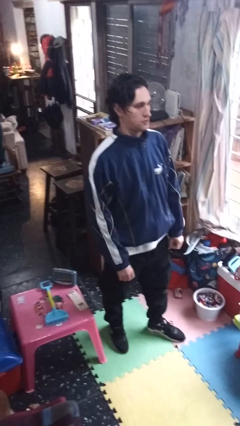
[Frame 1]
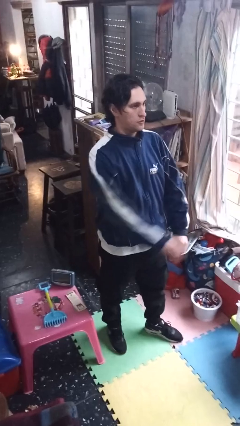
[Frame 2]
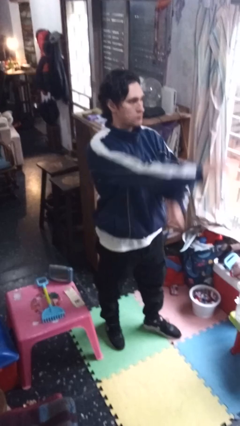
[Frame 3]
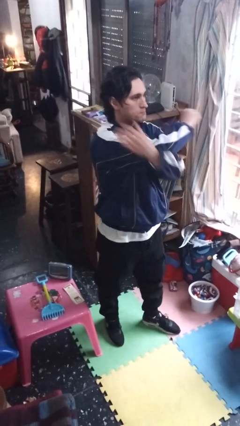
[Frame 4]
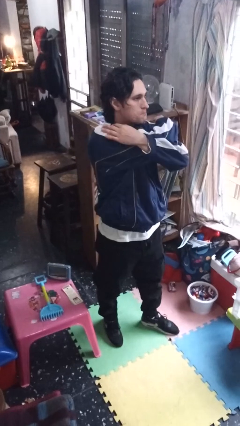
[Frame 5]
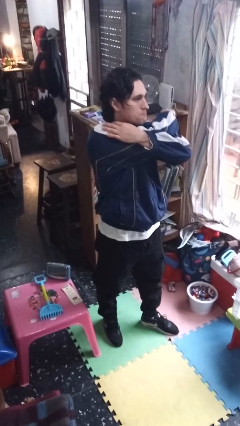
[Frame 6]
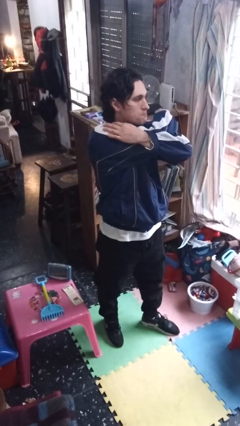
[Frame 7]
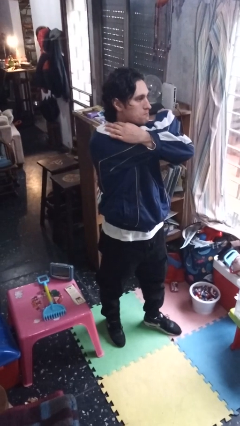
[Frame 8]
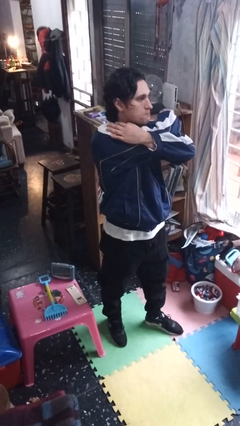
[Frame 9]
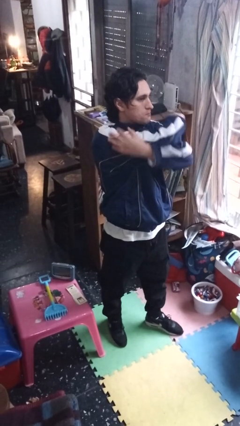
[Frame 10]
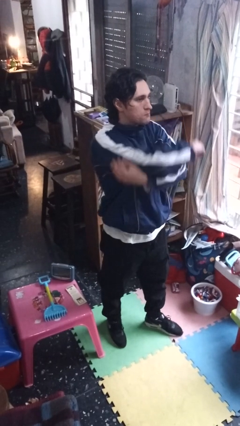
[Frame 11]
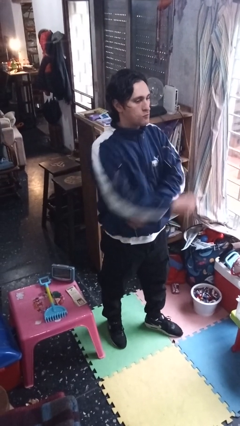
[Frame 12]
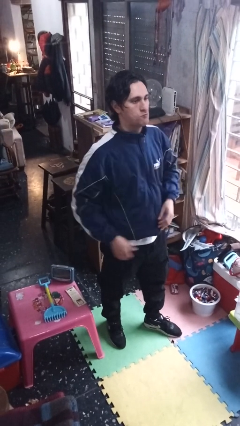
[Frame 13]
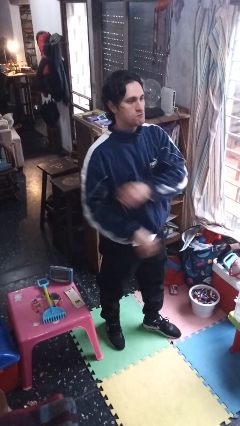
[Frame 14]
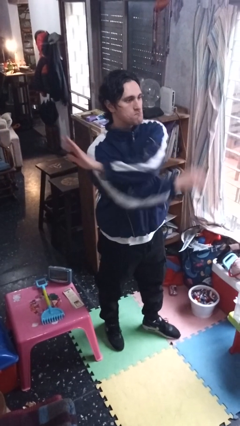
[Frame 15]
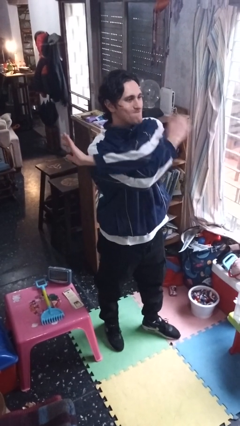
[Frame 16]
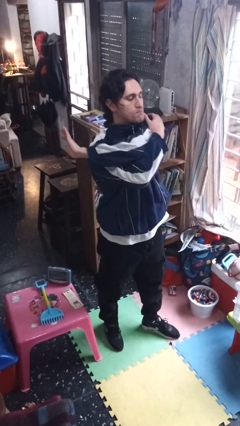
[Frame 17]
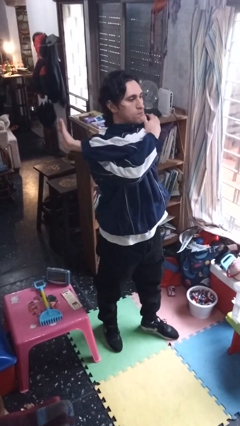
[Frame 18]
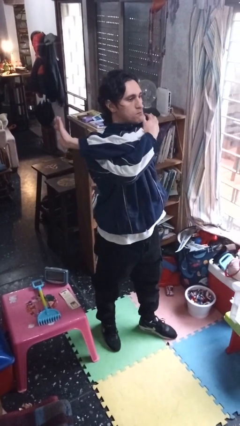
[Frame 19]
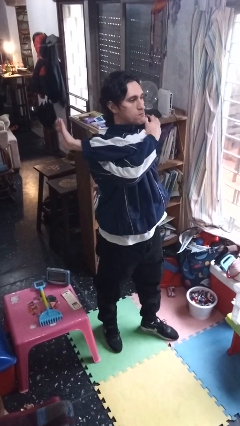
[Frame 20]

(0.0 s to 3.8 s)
person stretches arms to side

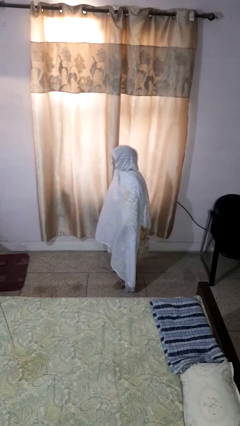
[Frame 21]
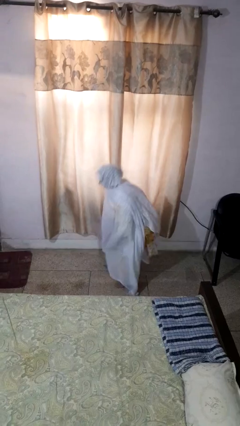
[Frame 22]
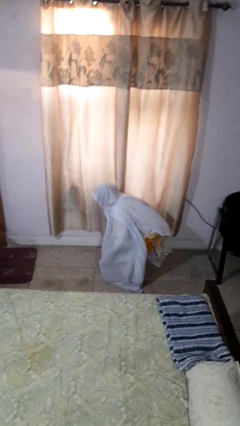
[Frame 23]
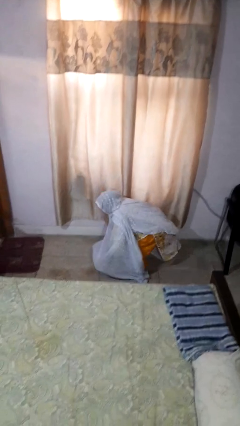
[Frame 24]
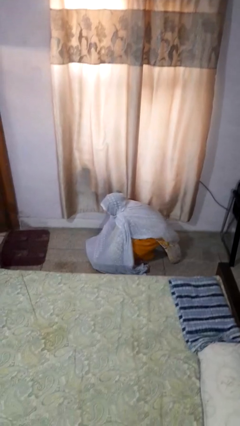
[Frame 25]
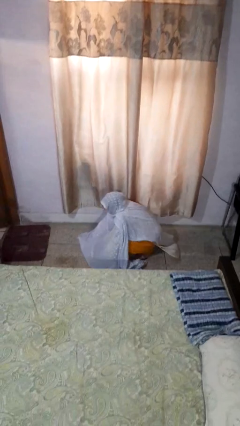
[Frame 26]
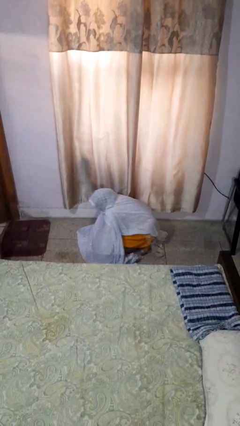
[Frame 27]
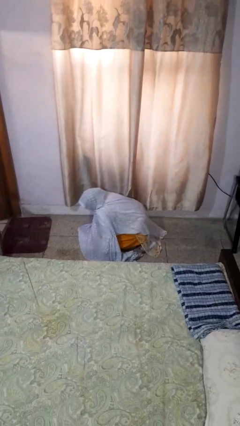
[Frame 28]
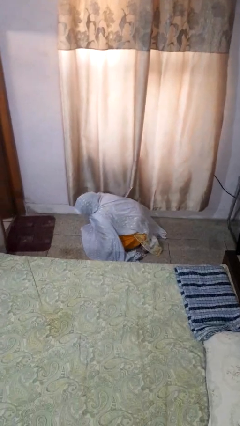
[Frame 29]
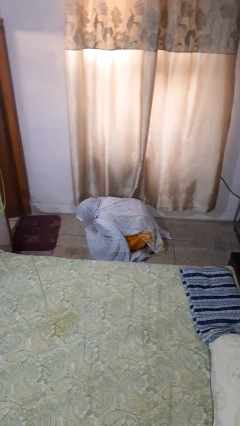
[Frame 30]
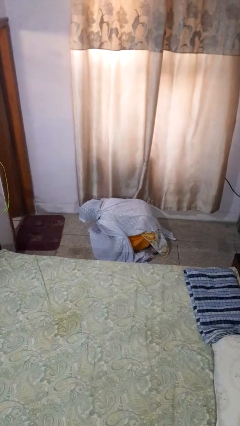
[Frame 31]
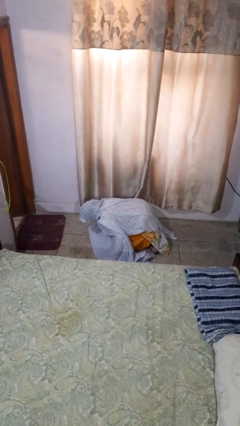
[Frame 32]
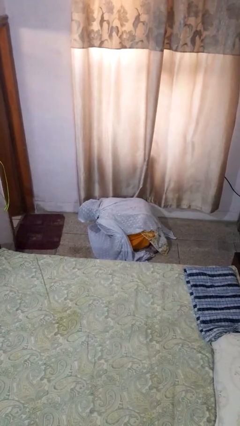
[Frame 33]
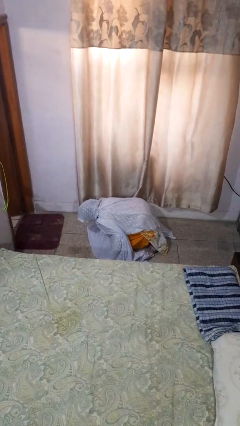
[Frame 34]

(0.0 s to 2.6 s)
person falls while standing

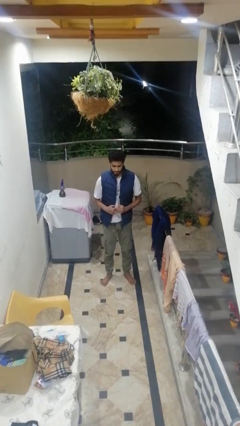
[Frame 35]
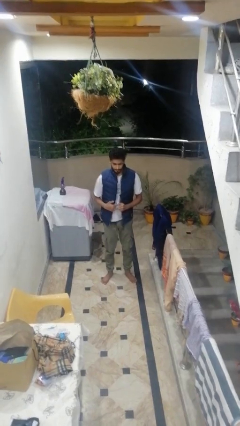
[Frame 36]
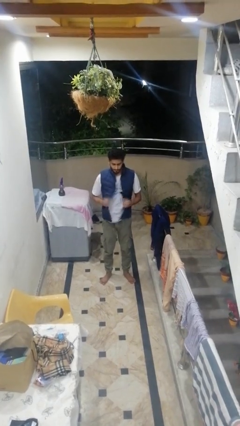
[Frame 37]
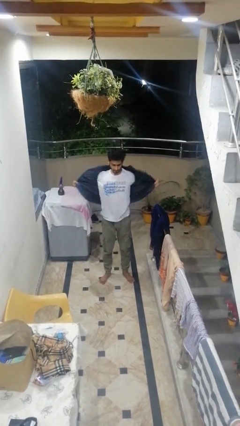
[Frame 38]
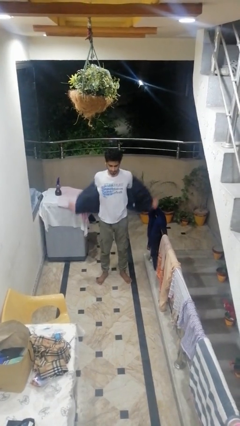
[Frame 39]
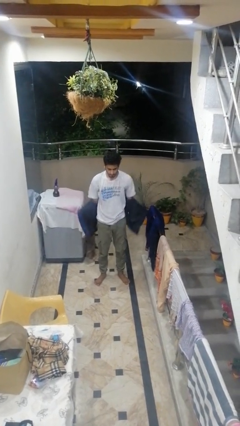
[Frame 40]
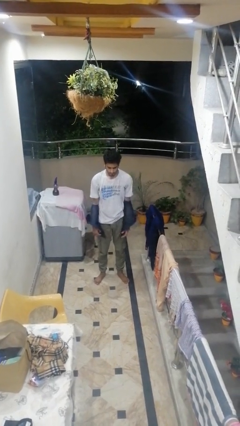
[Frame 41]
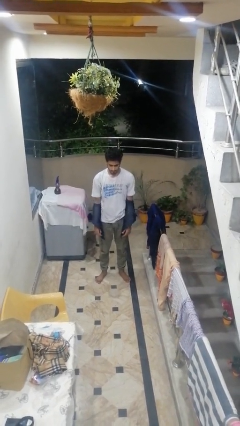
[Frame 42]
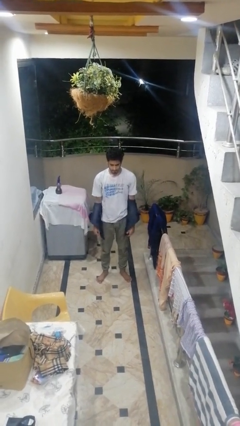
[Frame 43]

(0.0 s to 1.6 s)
person takes off jacket

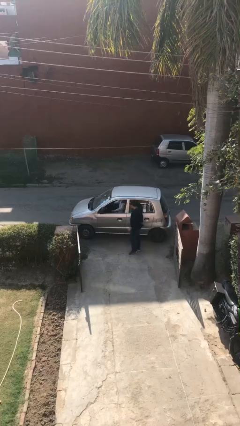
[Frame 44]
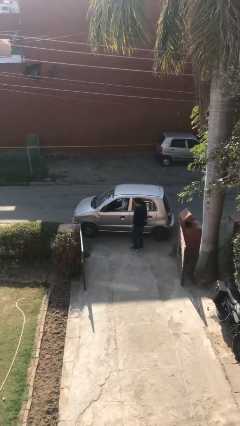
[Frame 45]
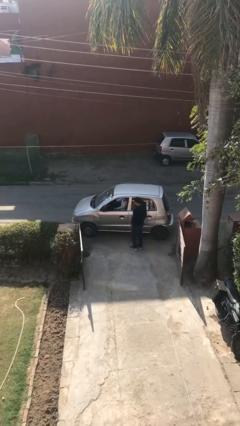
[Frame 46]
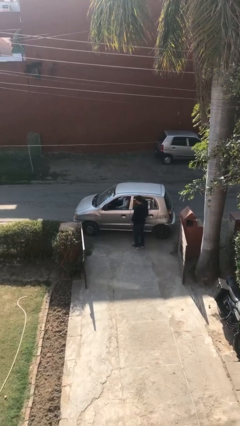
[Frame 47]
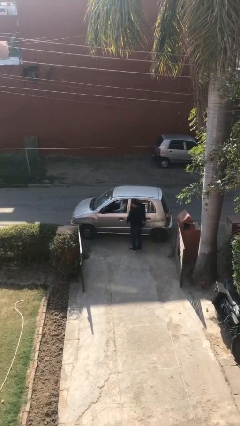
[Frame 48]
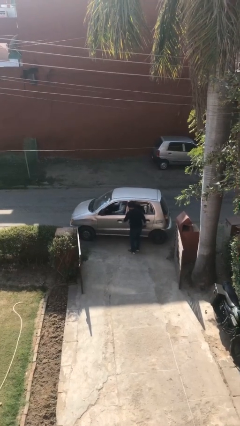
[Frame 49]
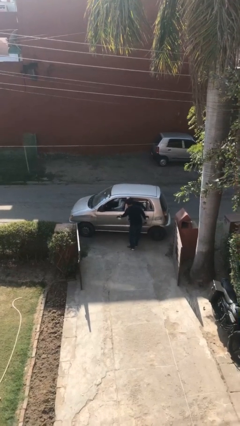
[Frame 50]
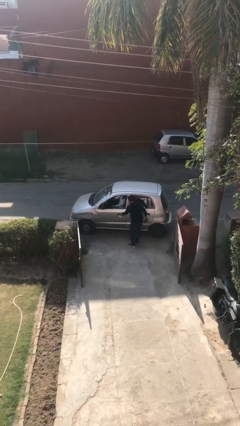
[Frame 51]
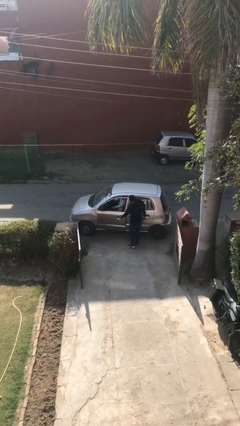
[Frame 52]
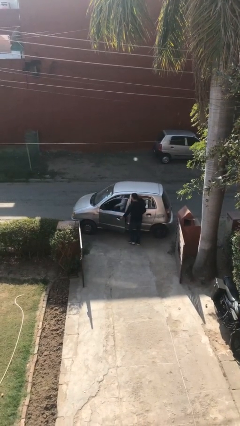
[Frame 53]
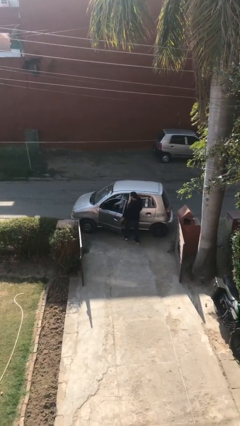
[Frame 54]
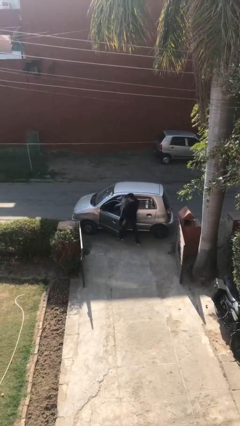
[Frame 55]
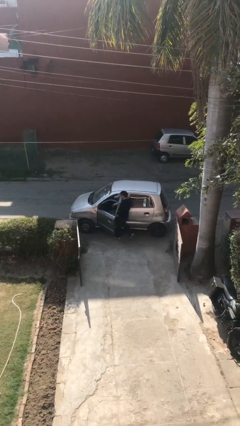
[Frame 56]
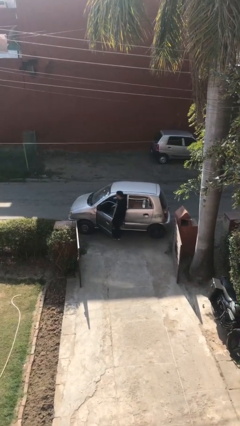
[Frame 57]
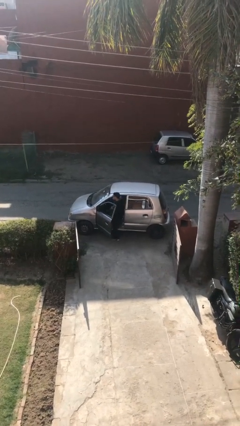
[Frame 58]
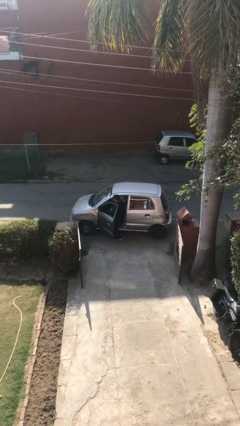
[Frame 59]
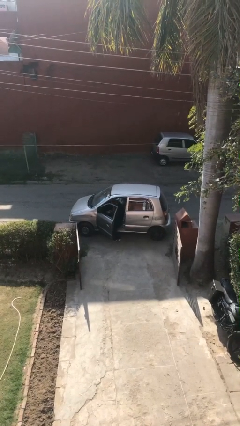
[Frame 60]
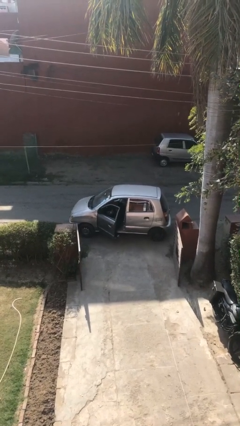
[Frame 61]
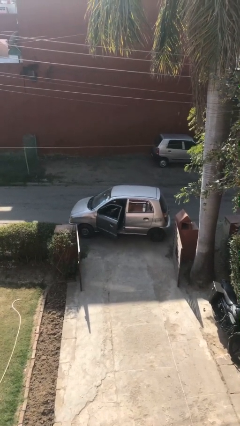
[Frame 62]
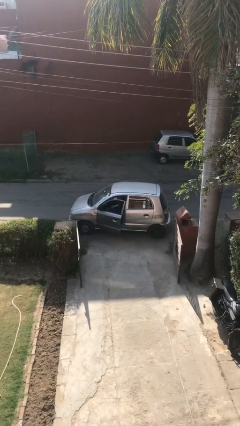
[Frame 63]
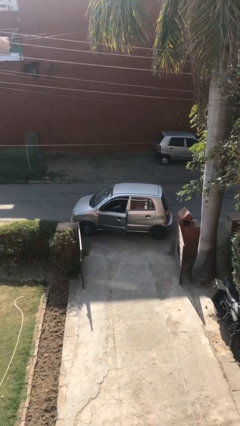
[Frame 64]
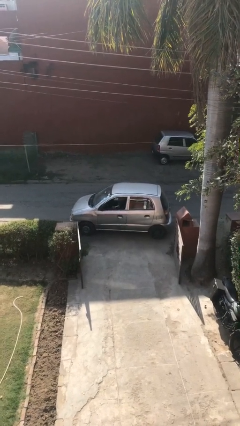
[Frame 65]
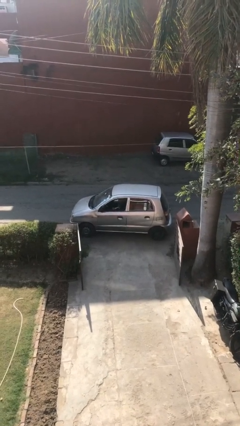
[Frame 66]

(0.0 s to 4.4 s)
car picks up person

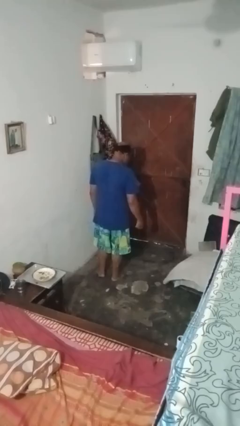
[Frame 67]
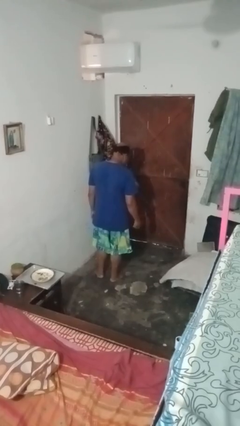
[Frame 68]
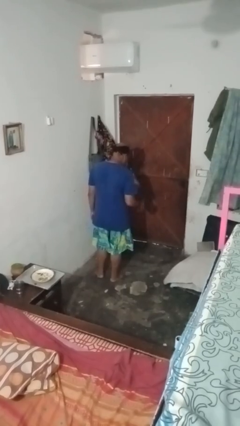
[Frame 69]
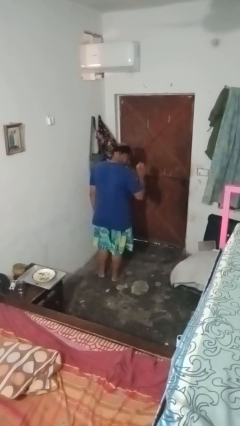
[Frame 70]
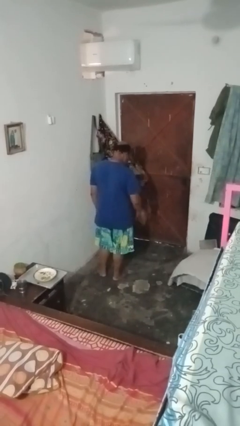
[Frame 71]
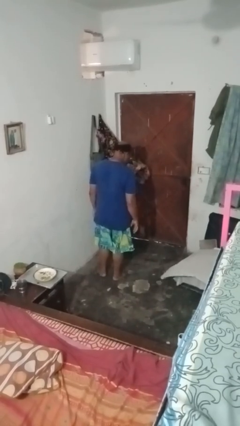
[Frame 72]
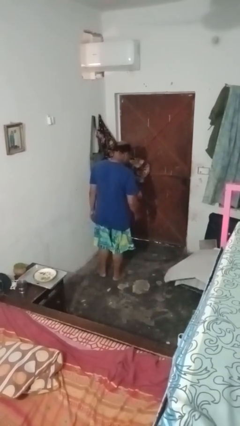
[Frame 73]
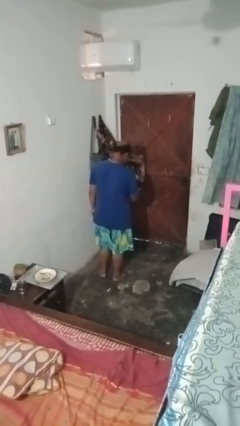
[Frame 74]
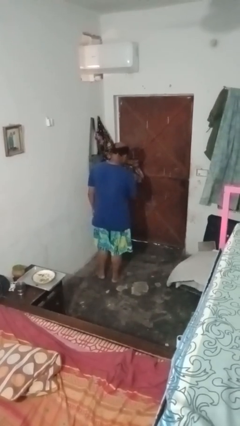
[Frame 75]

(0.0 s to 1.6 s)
person bounces ball on floor

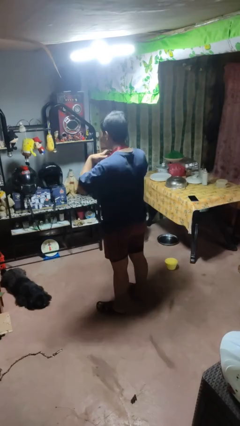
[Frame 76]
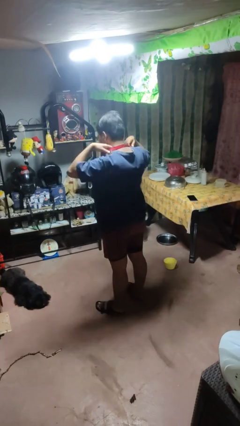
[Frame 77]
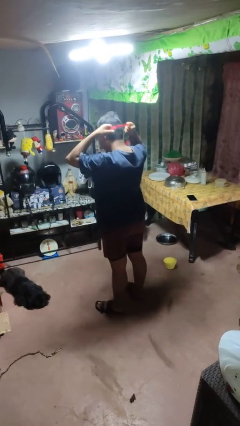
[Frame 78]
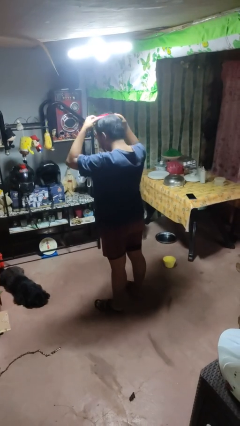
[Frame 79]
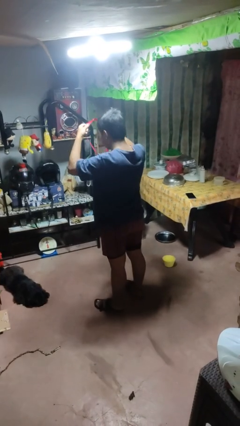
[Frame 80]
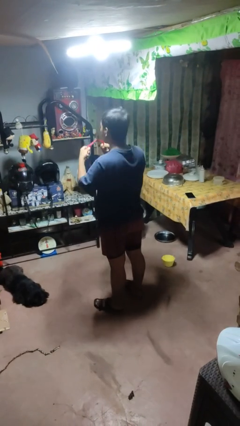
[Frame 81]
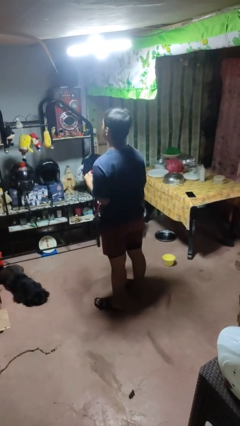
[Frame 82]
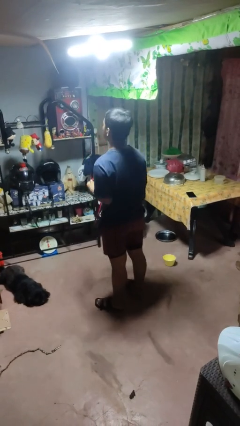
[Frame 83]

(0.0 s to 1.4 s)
person takes off necklace

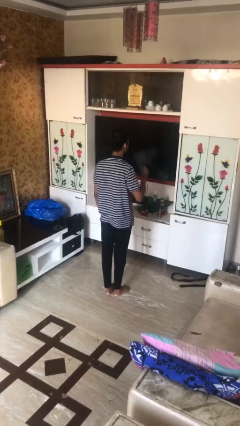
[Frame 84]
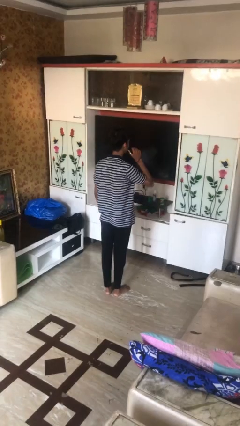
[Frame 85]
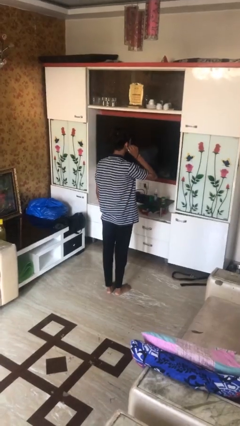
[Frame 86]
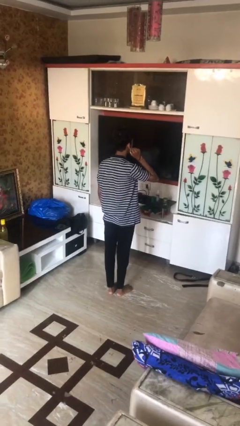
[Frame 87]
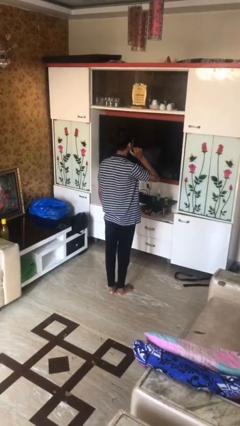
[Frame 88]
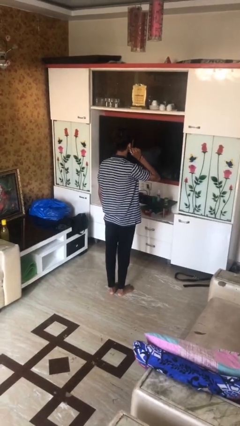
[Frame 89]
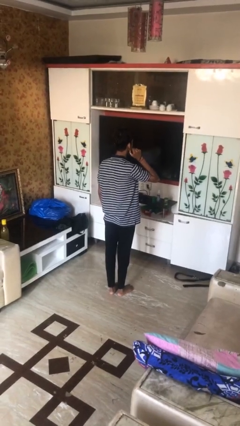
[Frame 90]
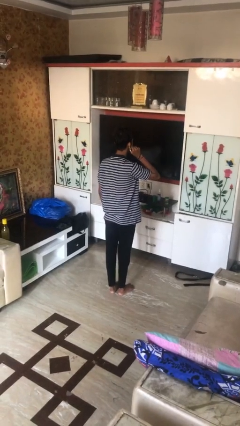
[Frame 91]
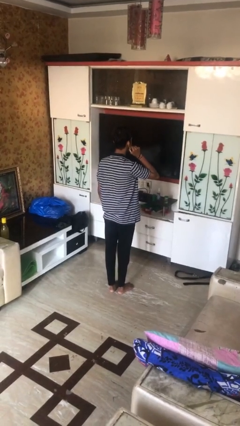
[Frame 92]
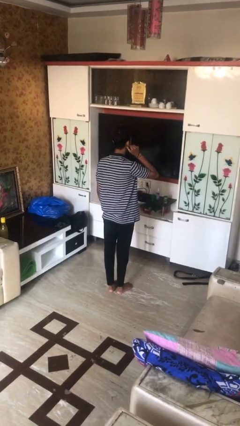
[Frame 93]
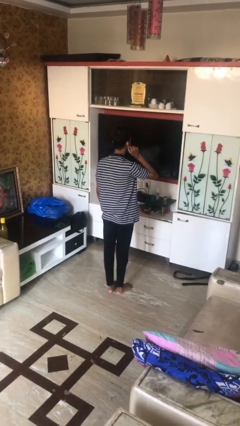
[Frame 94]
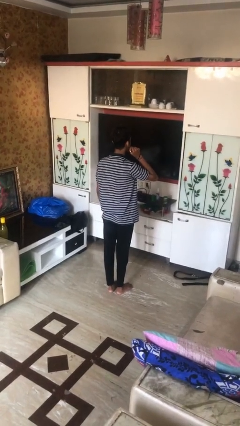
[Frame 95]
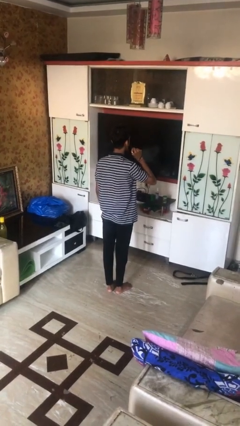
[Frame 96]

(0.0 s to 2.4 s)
person touches earlobe
